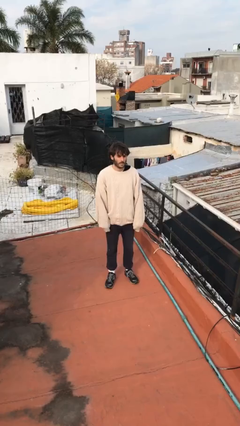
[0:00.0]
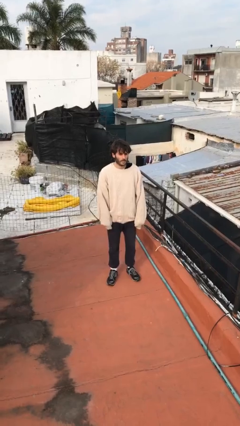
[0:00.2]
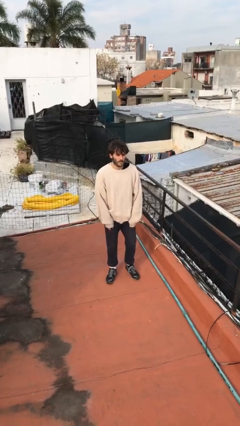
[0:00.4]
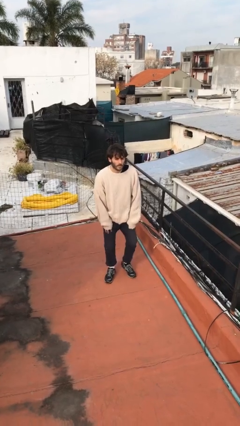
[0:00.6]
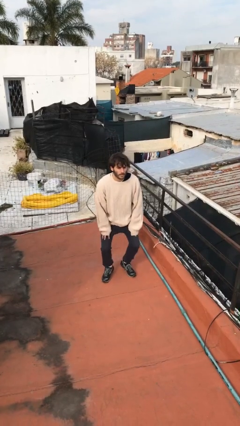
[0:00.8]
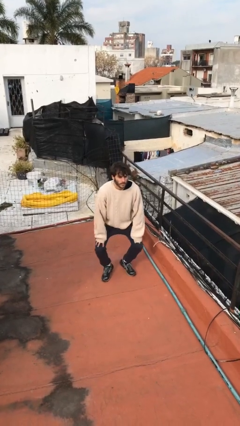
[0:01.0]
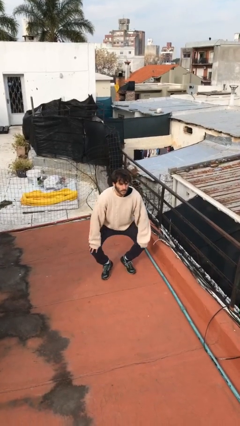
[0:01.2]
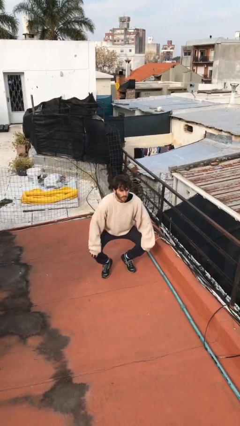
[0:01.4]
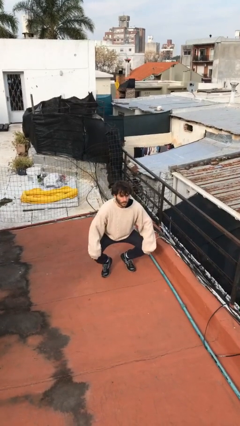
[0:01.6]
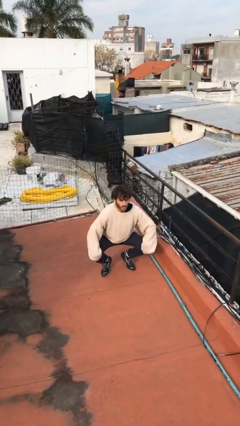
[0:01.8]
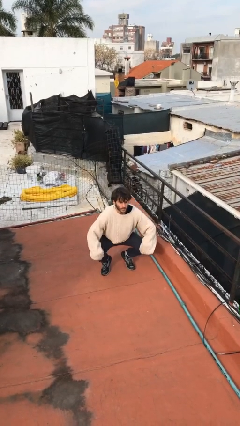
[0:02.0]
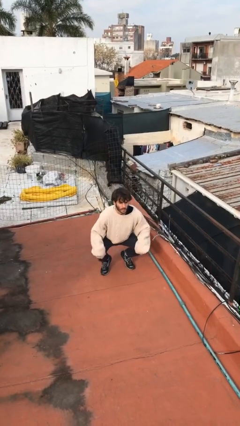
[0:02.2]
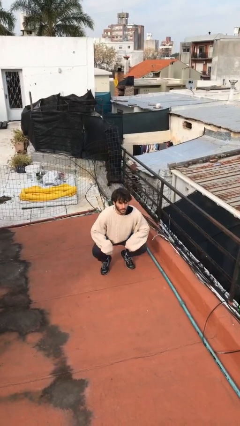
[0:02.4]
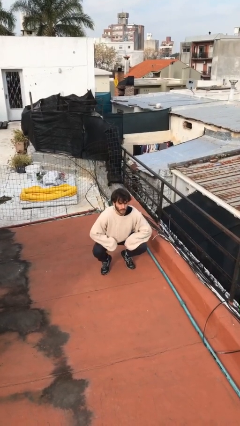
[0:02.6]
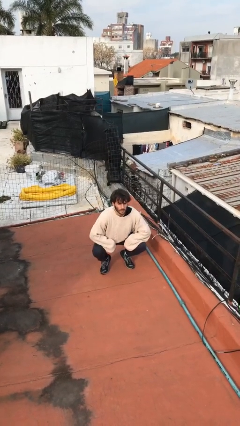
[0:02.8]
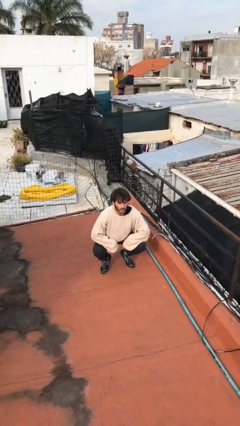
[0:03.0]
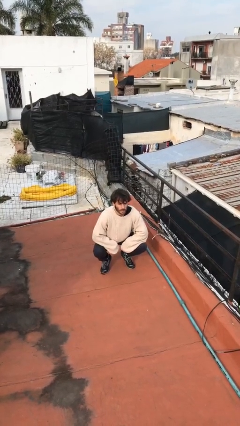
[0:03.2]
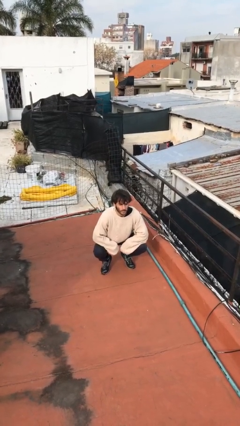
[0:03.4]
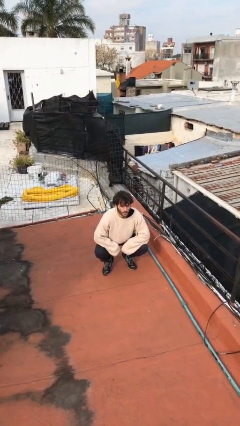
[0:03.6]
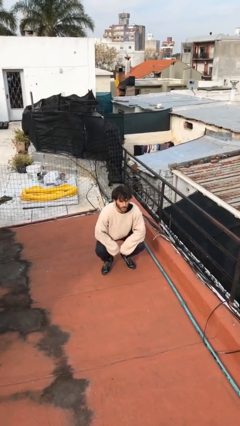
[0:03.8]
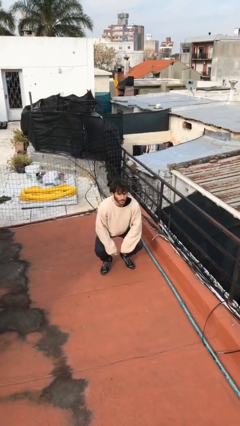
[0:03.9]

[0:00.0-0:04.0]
person squats

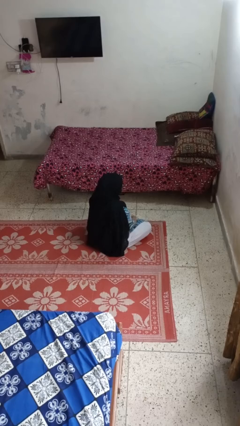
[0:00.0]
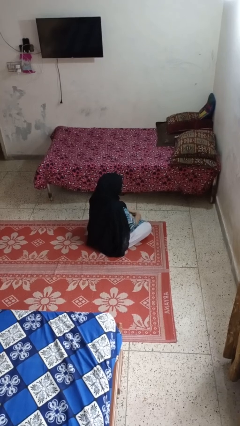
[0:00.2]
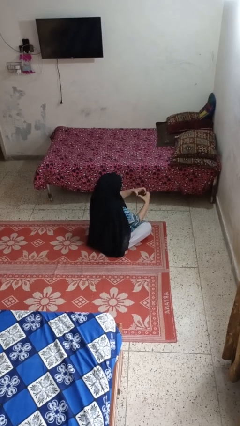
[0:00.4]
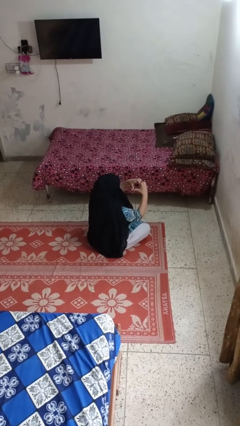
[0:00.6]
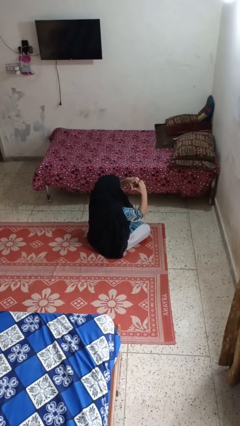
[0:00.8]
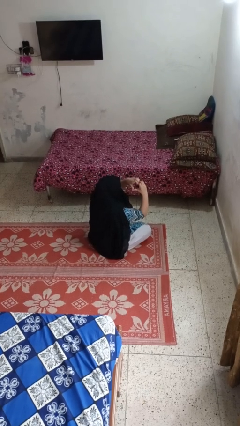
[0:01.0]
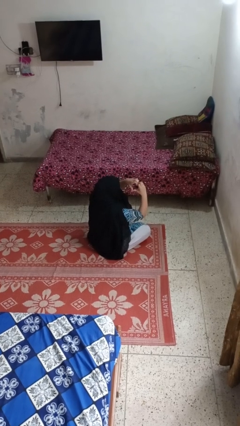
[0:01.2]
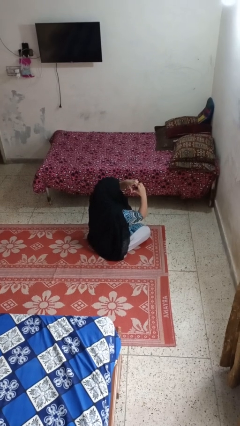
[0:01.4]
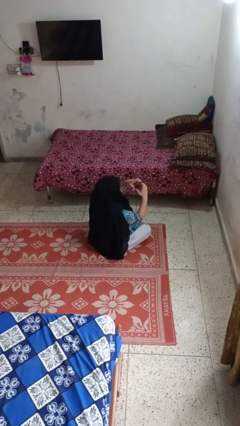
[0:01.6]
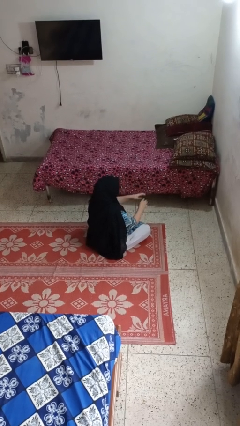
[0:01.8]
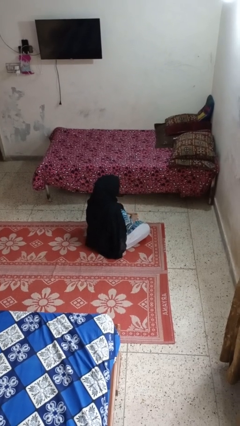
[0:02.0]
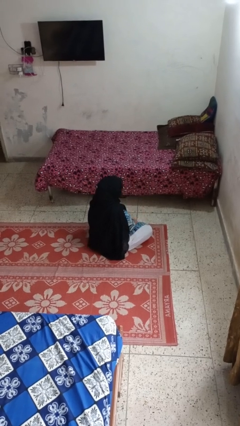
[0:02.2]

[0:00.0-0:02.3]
person gestures heart

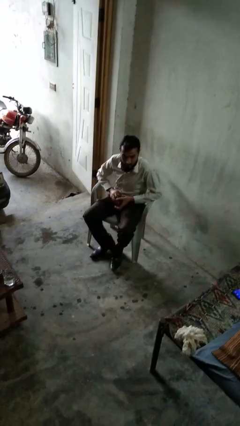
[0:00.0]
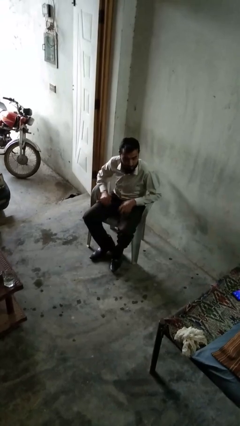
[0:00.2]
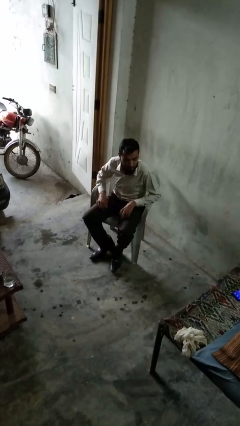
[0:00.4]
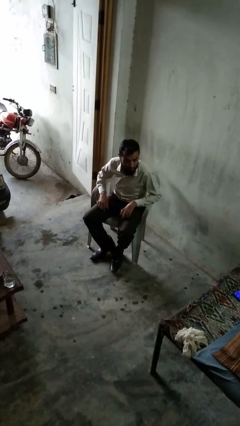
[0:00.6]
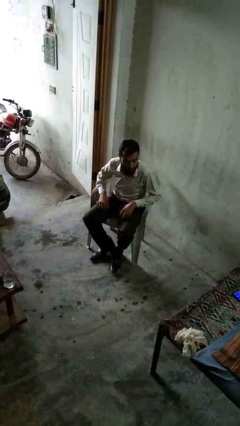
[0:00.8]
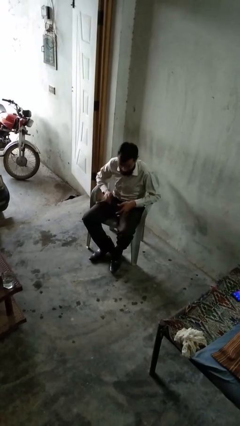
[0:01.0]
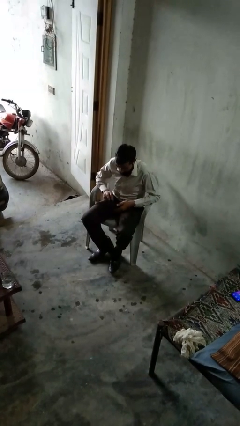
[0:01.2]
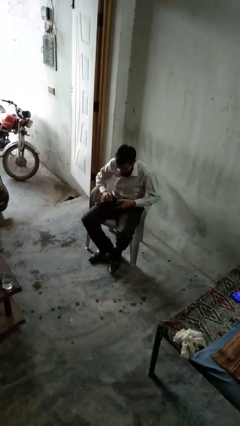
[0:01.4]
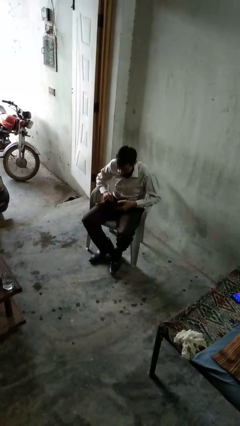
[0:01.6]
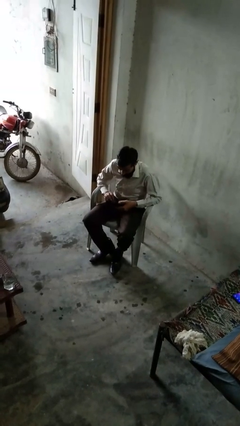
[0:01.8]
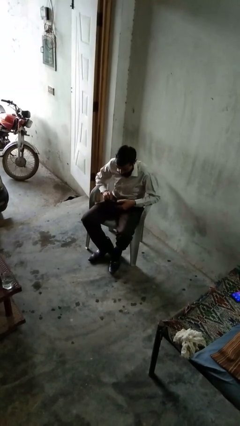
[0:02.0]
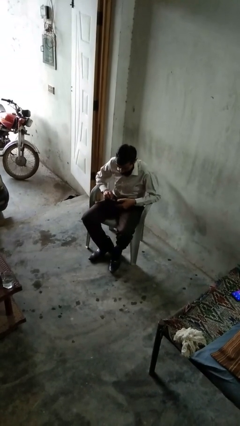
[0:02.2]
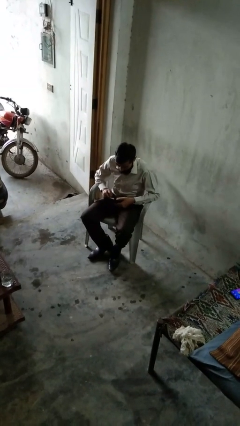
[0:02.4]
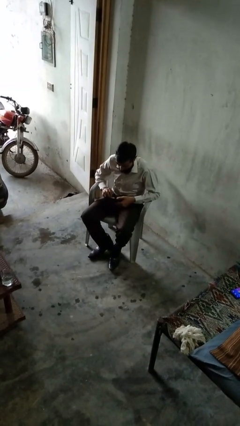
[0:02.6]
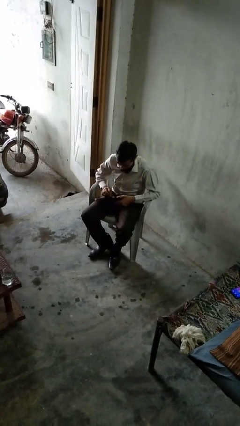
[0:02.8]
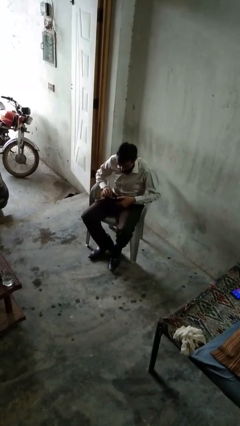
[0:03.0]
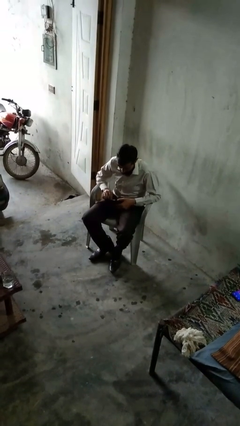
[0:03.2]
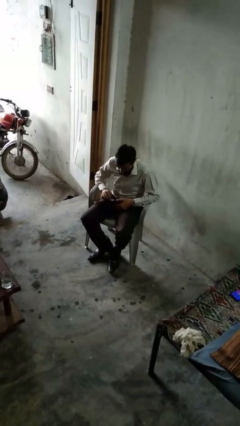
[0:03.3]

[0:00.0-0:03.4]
person searches in purse

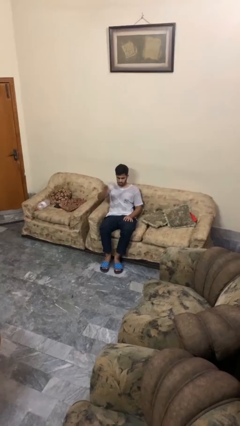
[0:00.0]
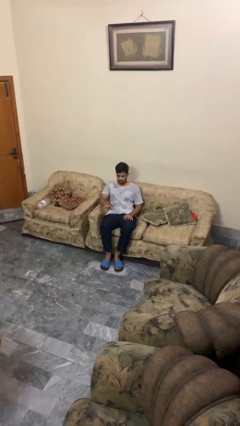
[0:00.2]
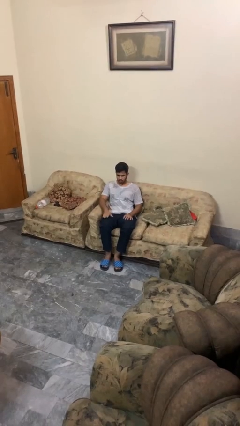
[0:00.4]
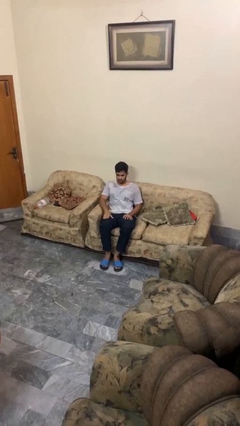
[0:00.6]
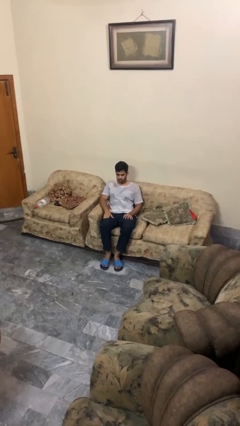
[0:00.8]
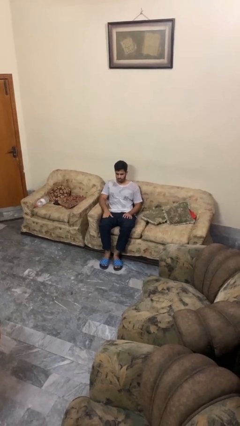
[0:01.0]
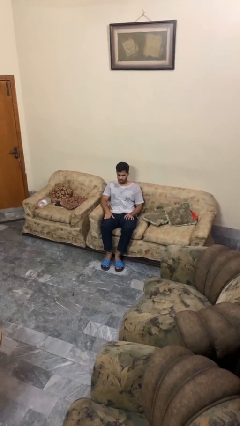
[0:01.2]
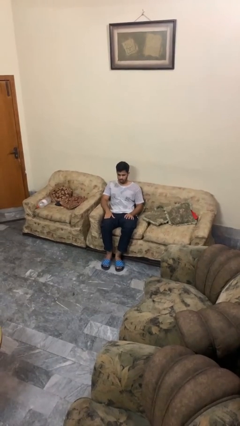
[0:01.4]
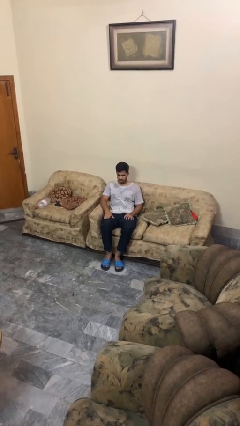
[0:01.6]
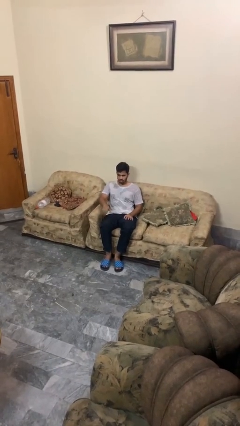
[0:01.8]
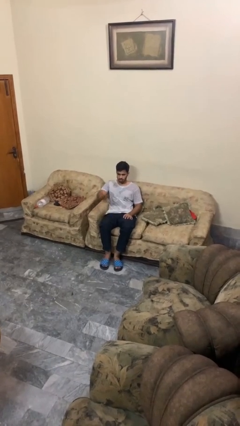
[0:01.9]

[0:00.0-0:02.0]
person gestures lower hand

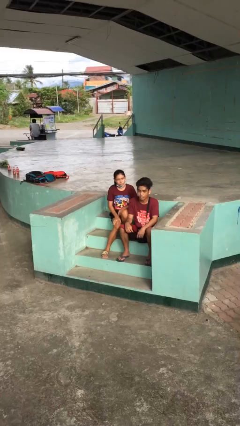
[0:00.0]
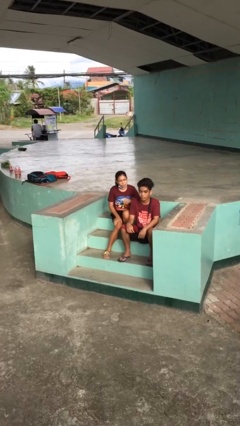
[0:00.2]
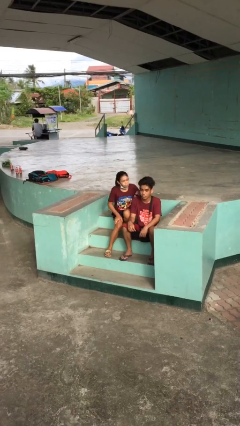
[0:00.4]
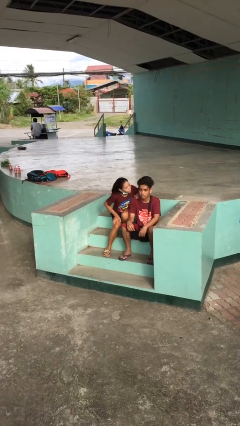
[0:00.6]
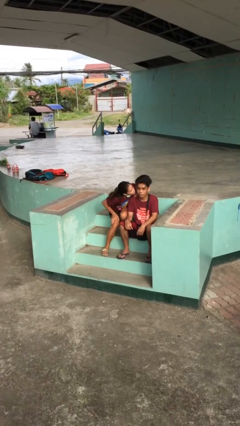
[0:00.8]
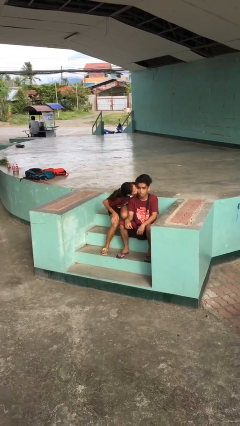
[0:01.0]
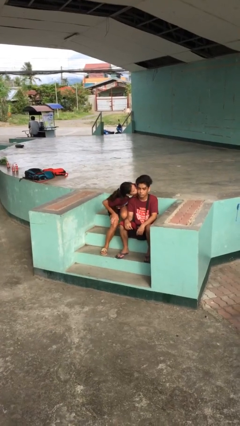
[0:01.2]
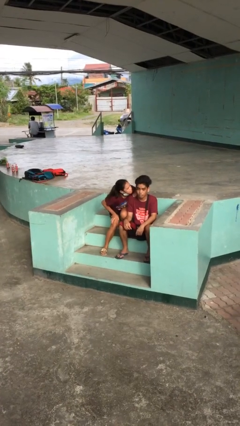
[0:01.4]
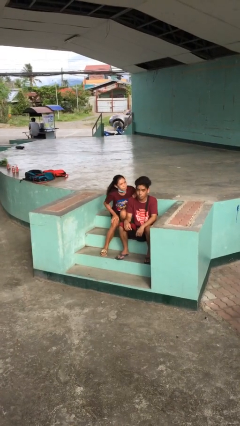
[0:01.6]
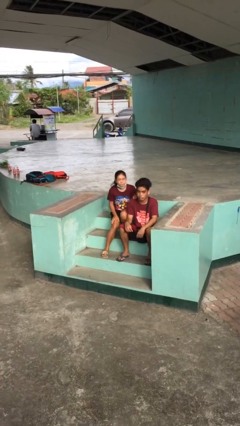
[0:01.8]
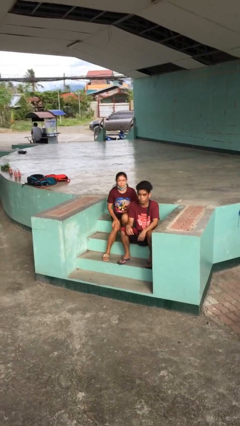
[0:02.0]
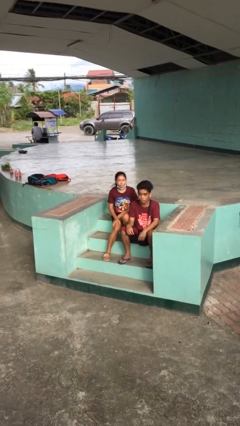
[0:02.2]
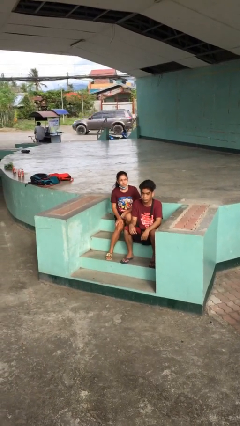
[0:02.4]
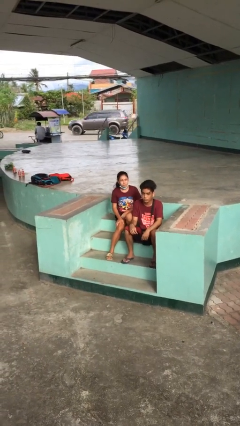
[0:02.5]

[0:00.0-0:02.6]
person kisses cheek of person

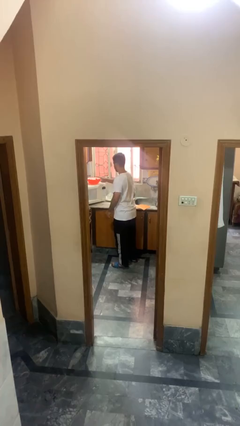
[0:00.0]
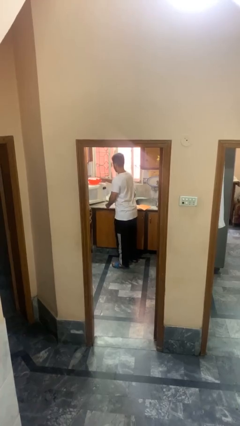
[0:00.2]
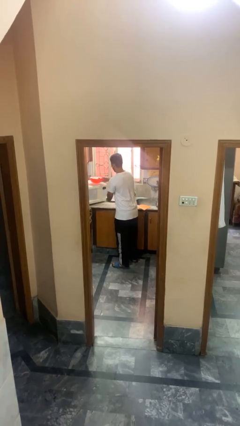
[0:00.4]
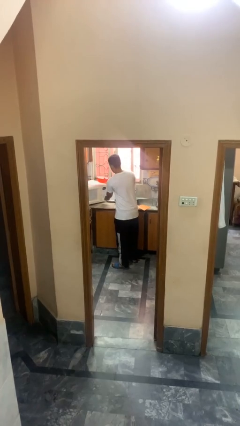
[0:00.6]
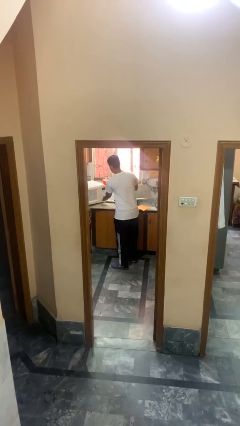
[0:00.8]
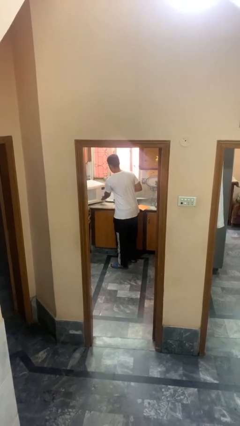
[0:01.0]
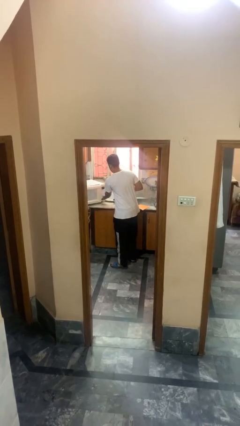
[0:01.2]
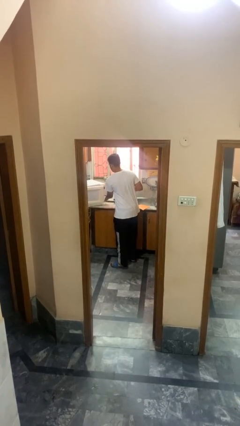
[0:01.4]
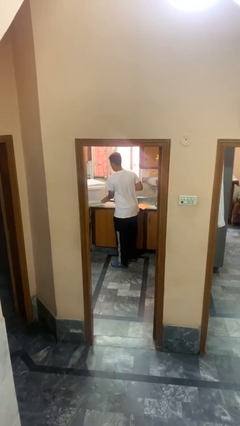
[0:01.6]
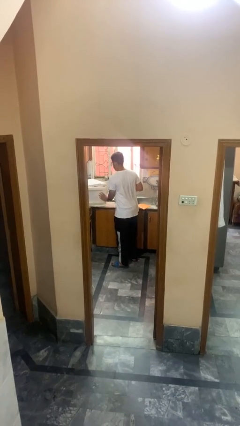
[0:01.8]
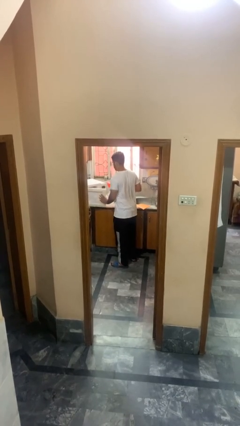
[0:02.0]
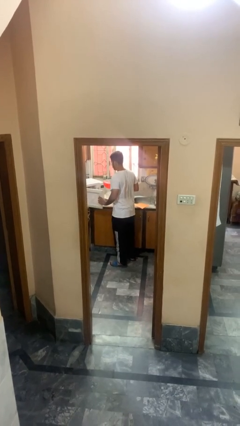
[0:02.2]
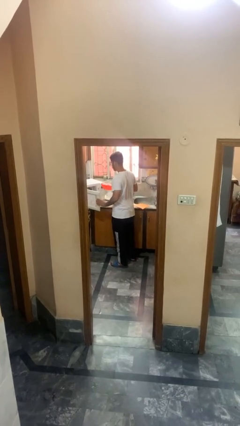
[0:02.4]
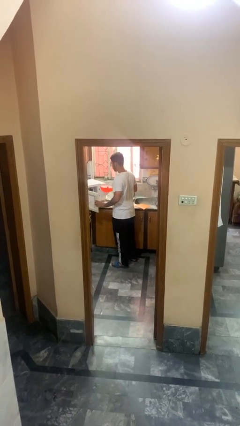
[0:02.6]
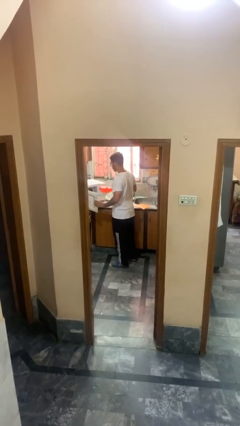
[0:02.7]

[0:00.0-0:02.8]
person opens microwave
